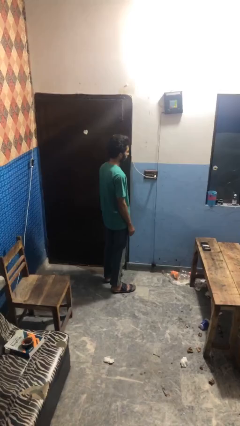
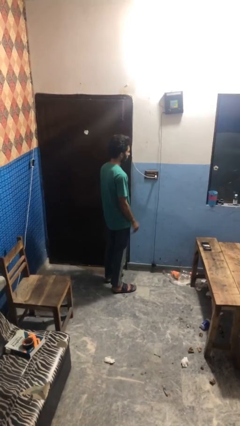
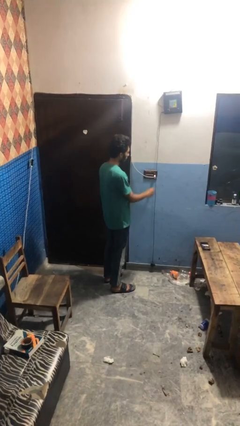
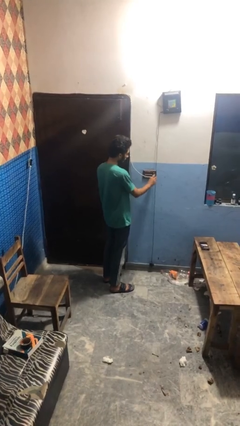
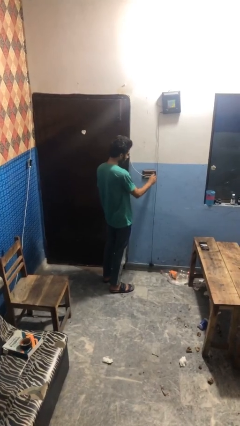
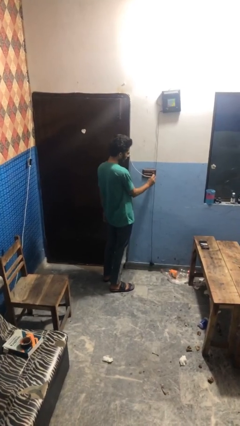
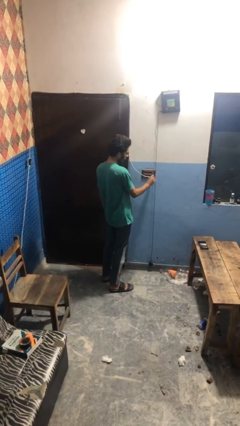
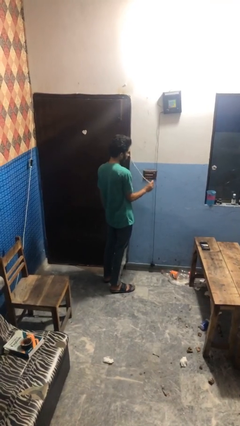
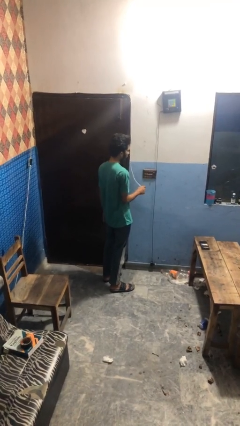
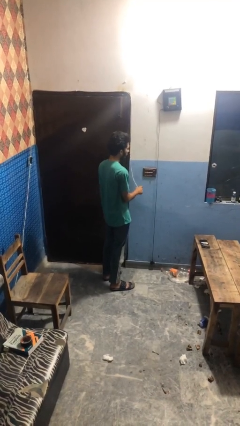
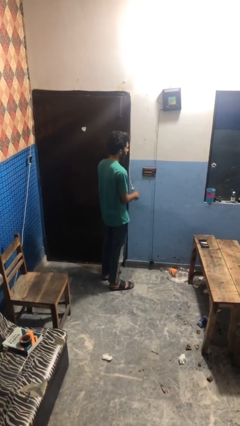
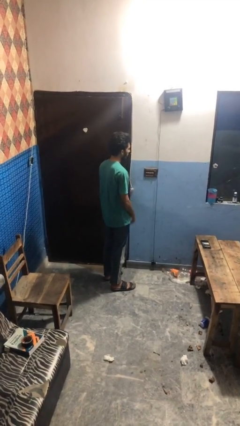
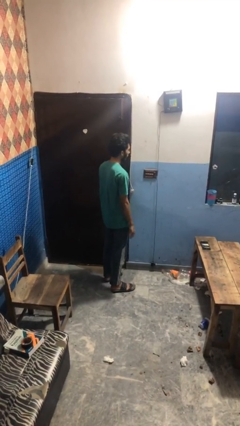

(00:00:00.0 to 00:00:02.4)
person unplugs from electrical socket

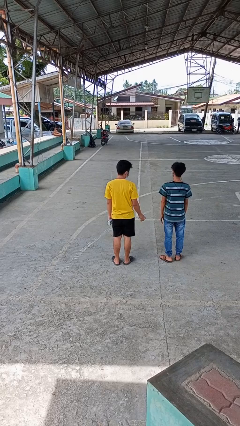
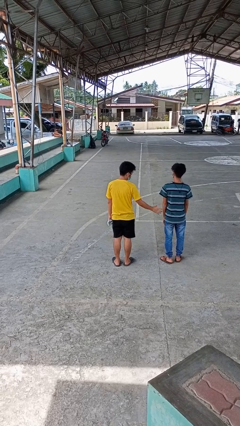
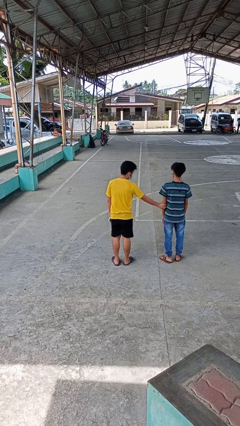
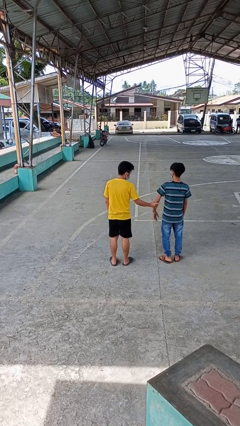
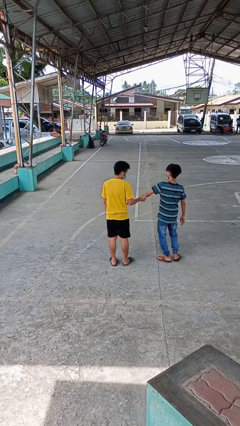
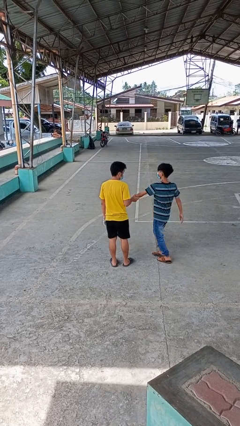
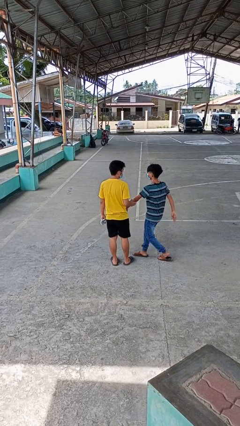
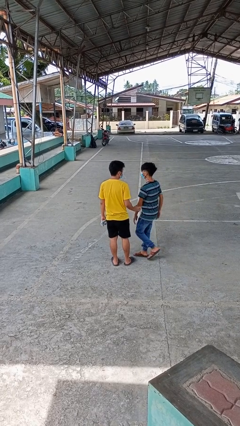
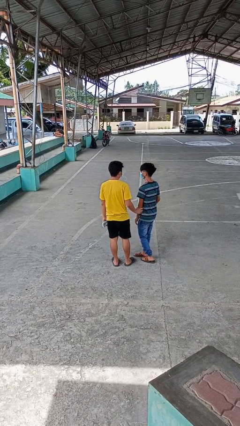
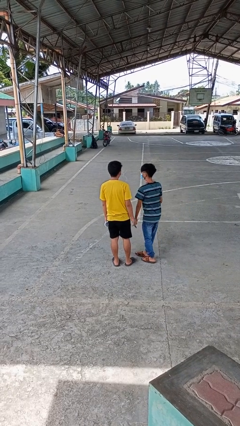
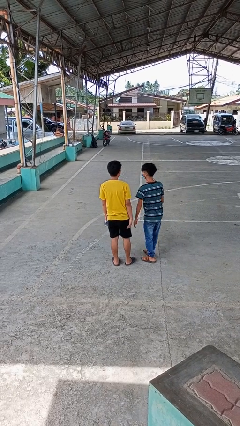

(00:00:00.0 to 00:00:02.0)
person grabs person by forearm

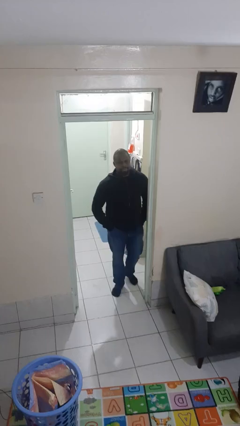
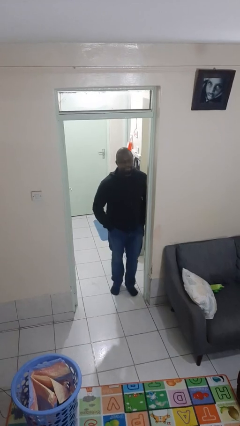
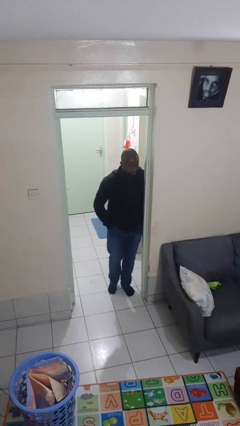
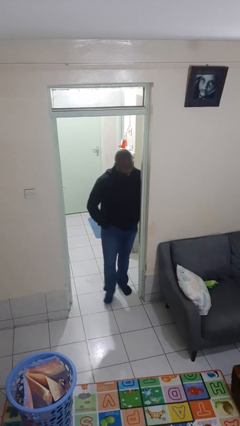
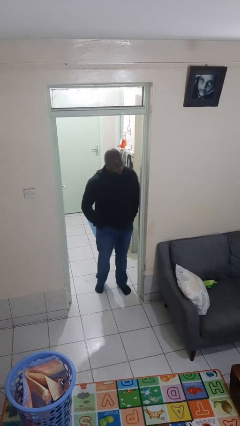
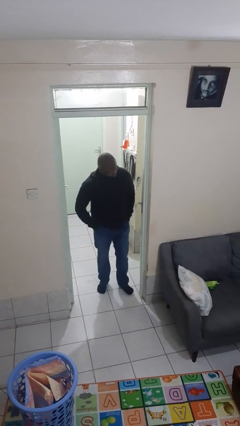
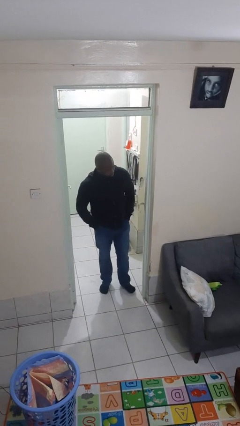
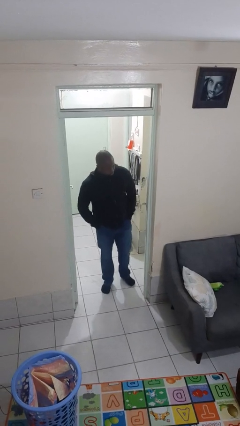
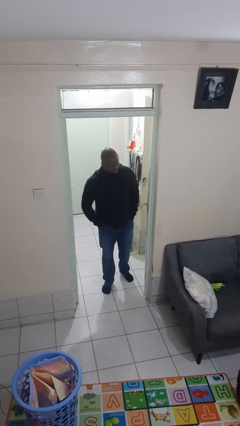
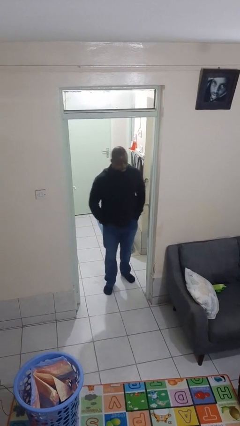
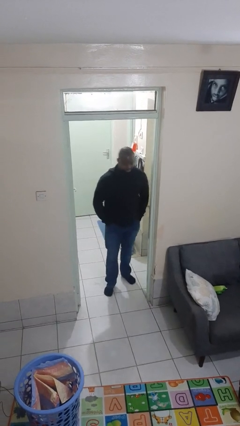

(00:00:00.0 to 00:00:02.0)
person bumps into wall

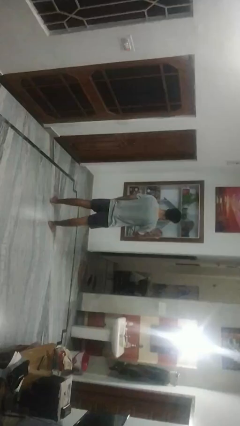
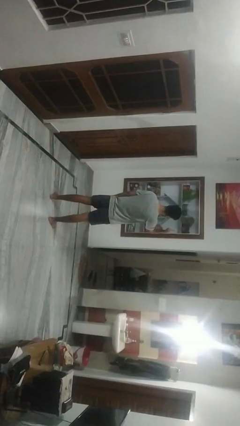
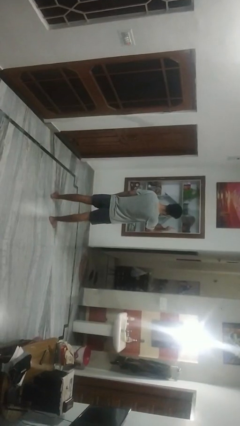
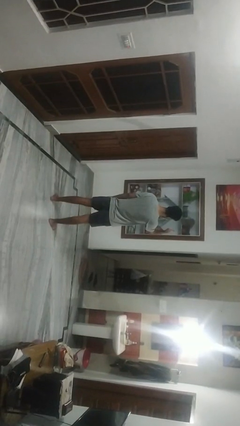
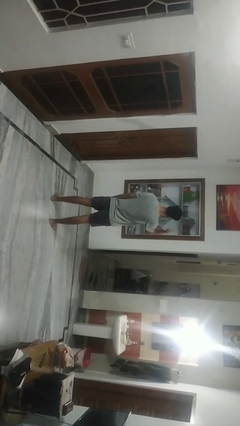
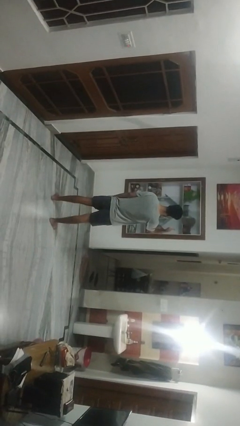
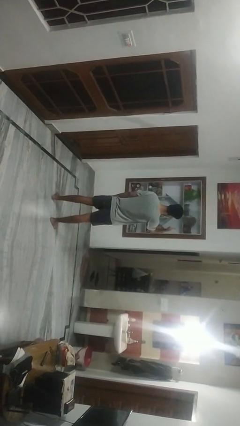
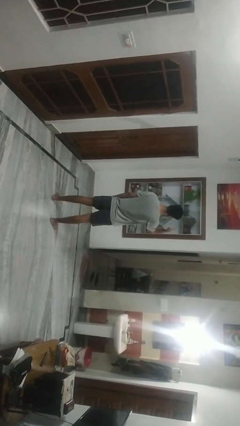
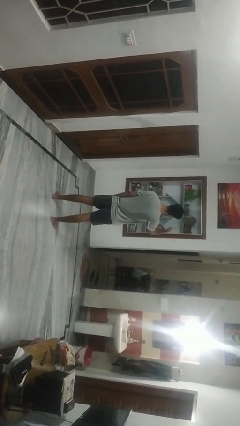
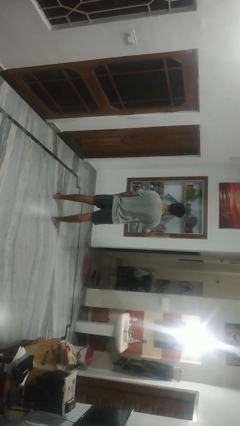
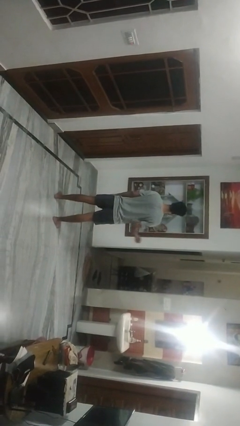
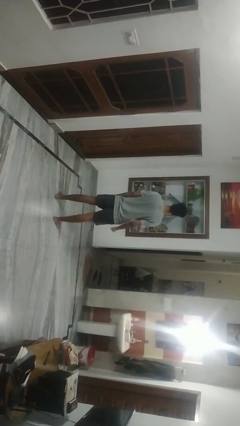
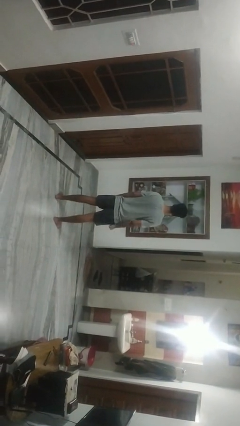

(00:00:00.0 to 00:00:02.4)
person gestures thumbs up

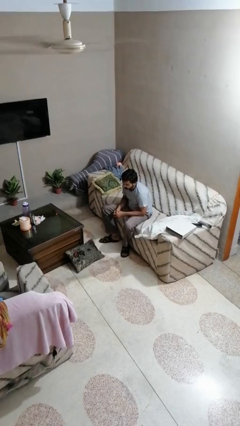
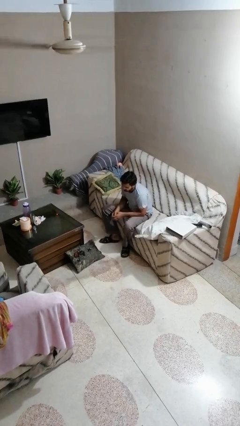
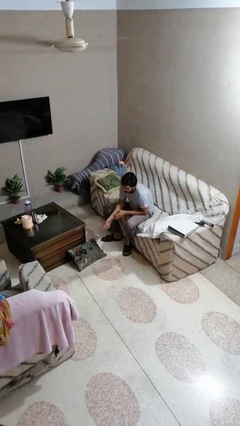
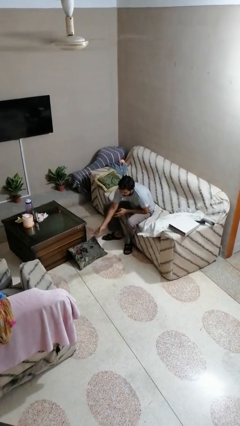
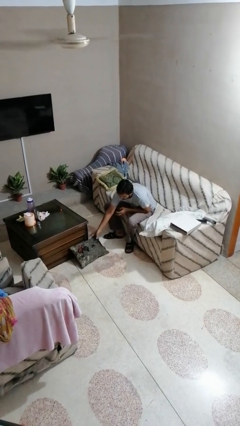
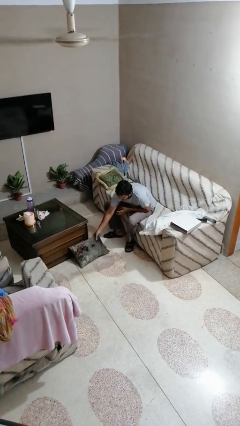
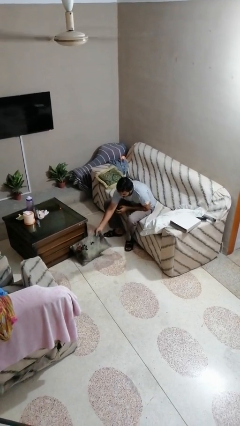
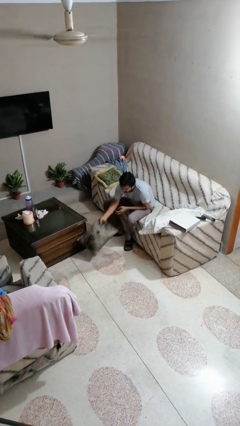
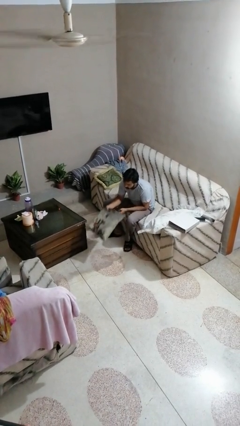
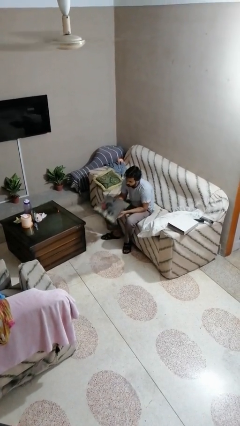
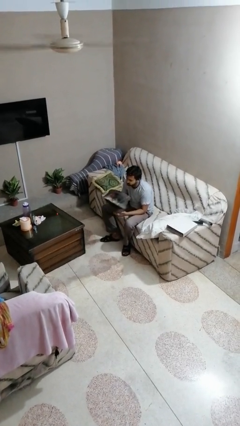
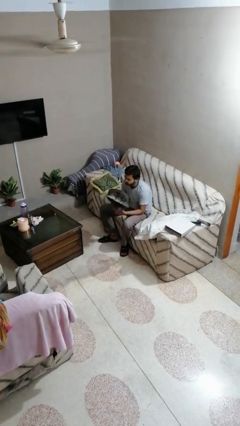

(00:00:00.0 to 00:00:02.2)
person picks up object from floor

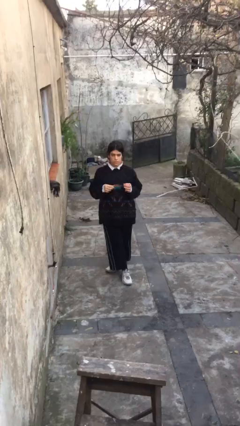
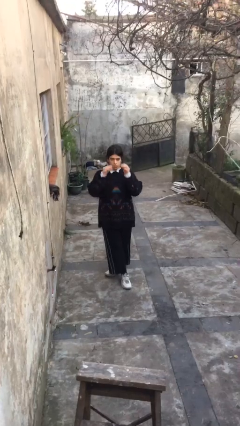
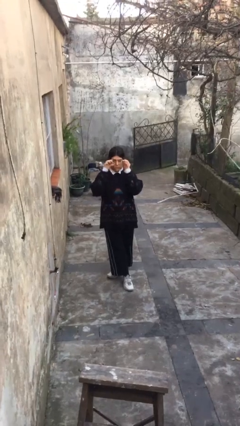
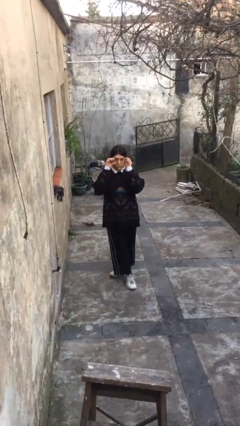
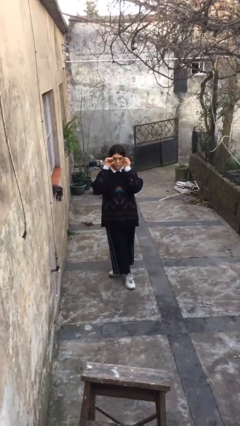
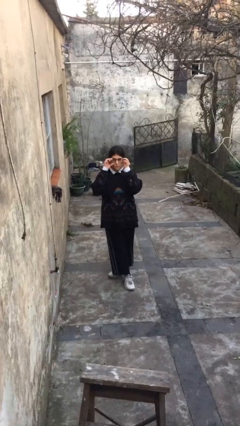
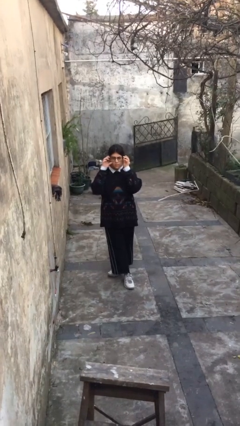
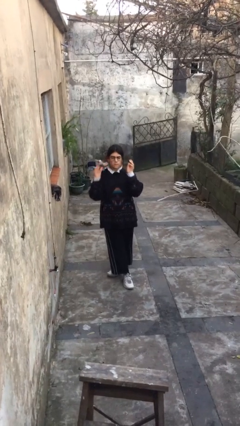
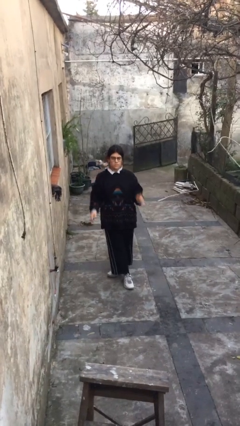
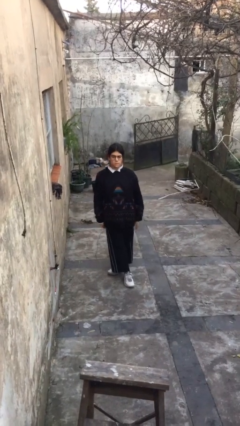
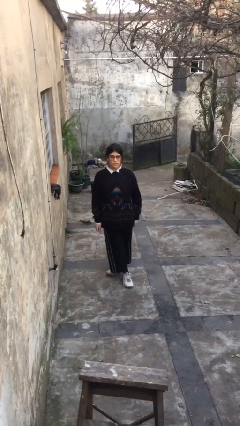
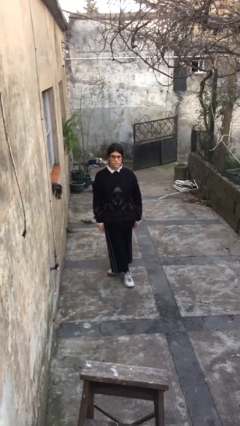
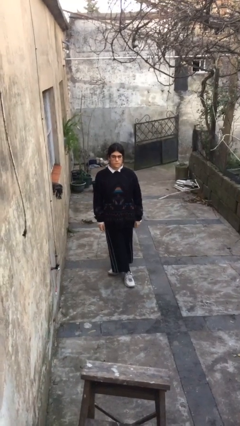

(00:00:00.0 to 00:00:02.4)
person puts on glasses

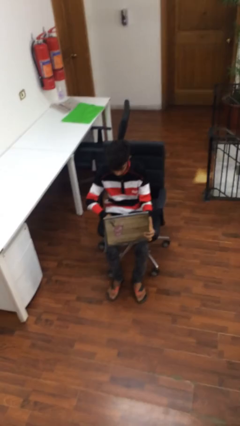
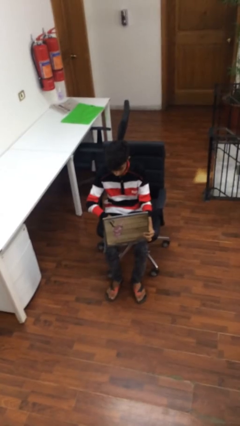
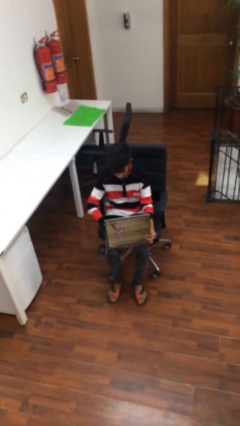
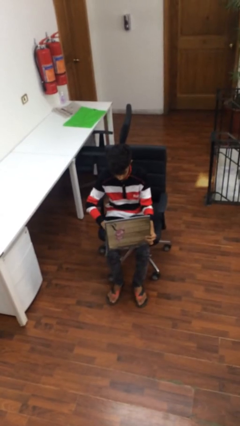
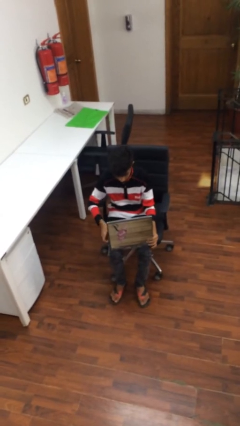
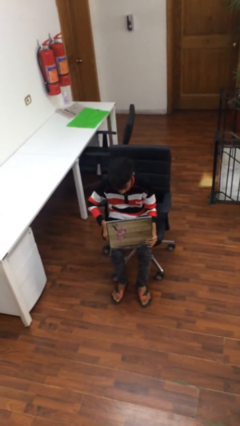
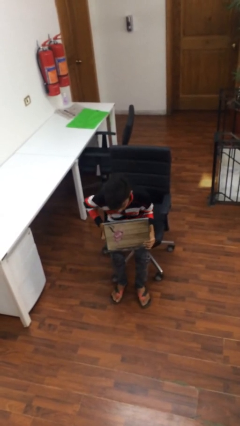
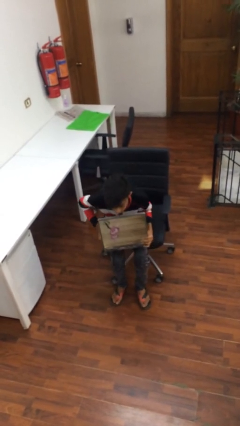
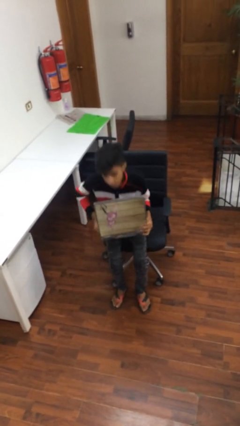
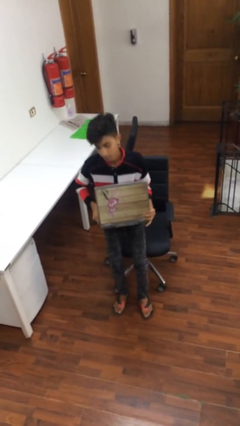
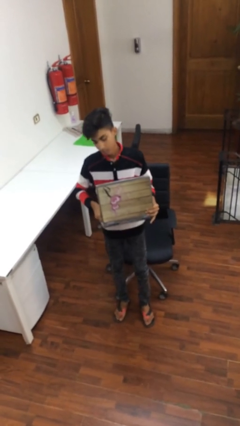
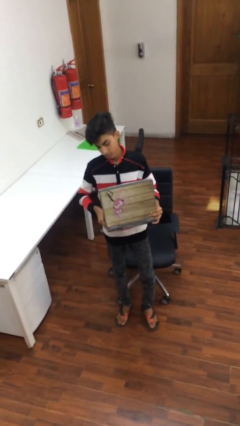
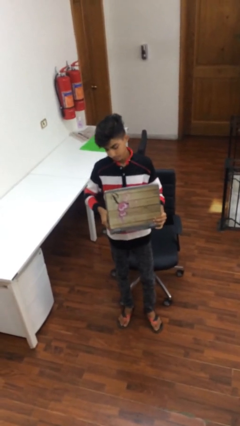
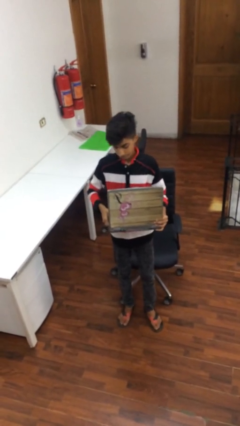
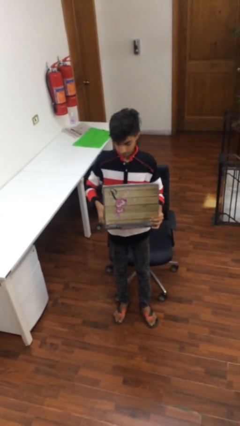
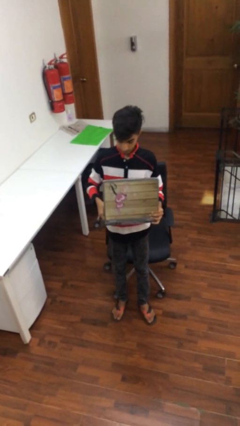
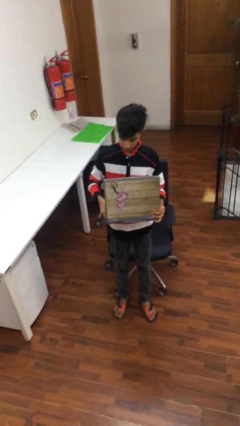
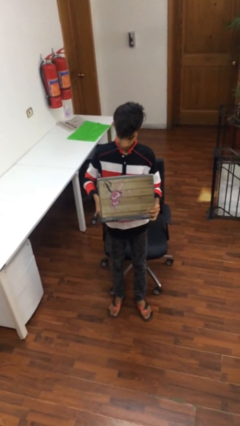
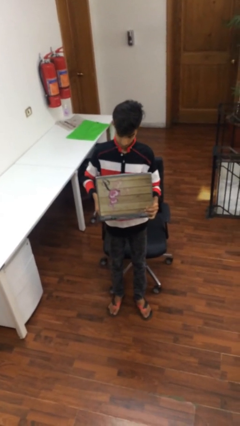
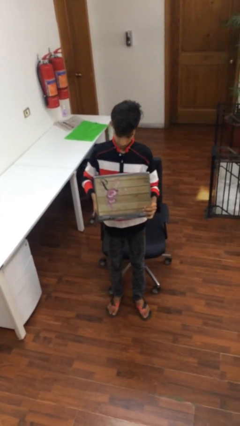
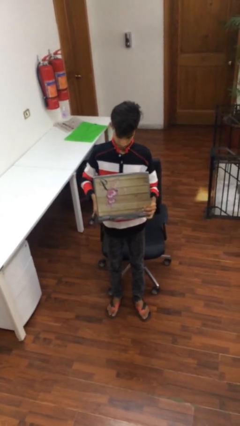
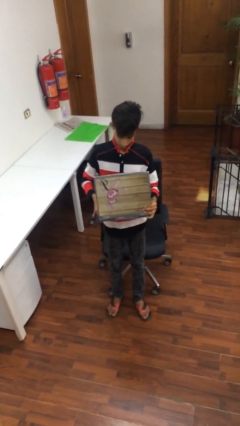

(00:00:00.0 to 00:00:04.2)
person stands up
